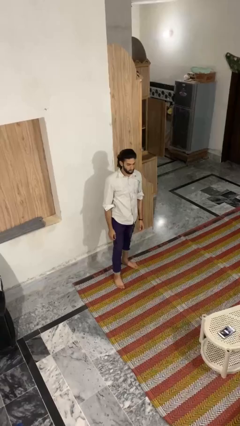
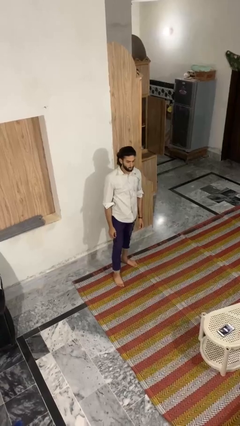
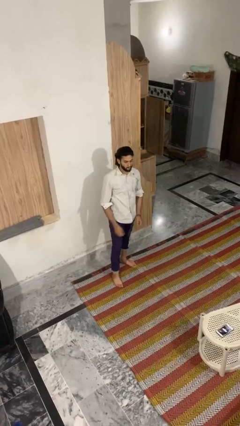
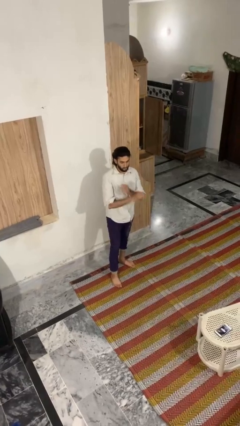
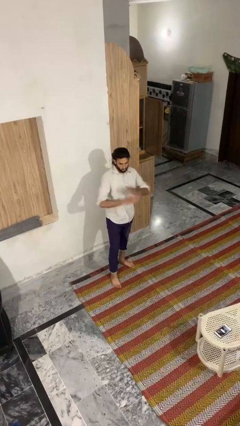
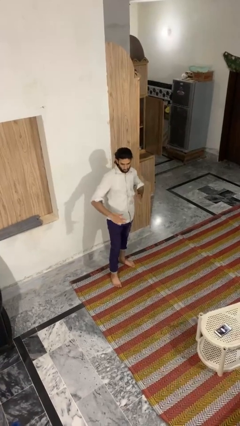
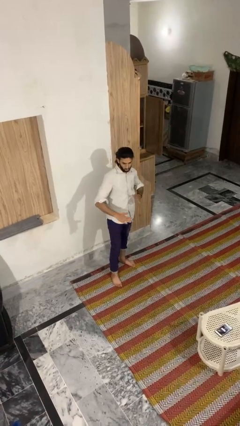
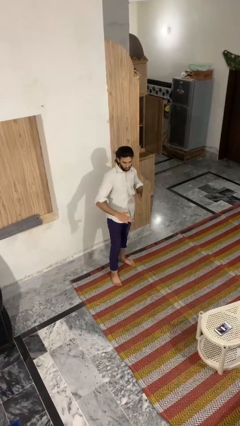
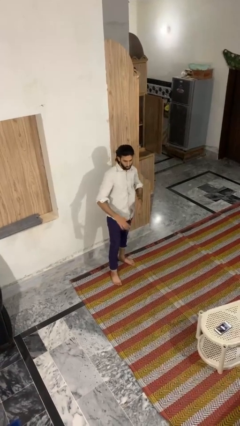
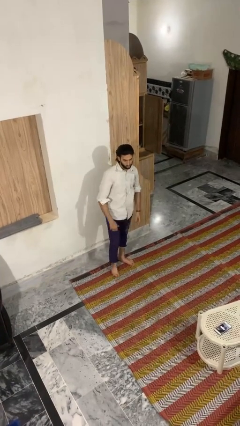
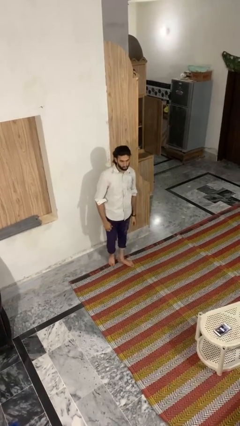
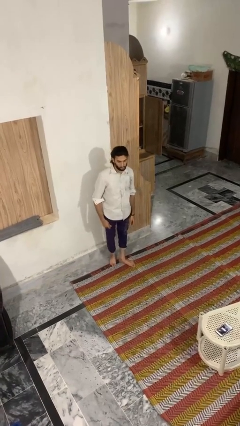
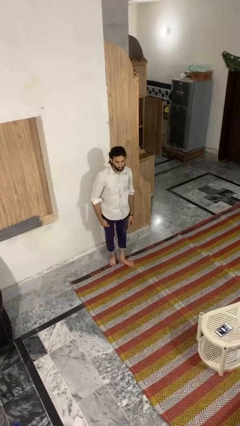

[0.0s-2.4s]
person karate chop

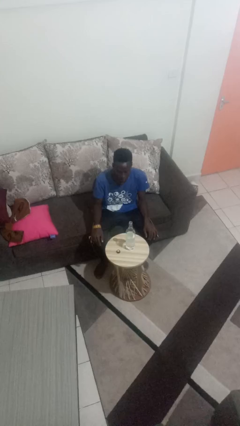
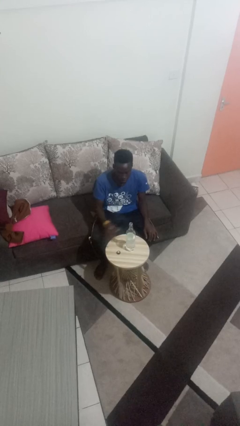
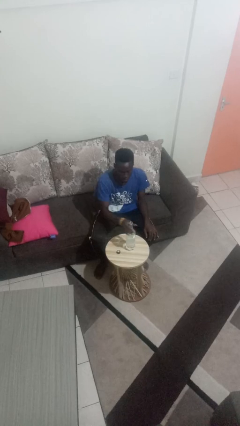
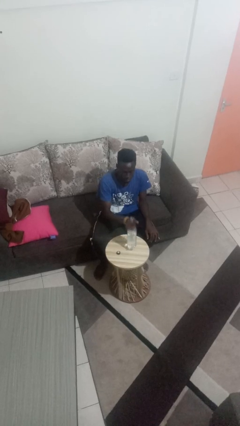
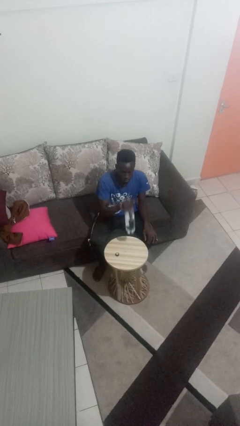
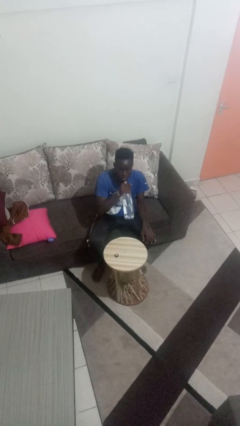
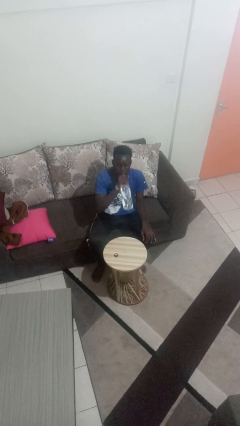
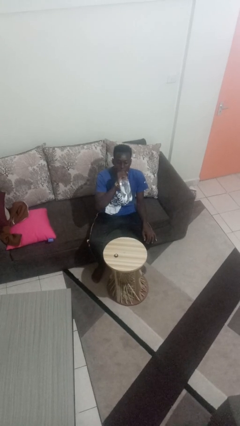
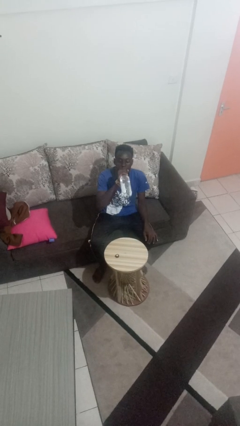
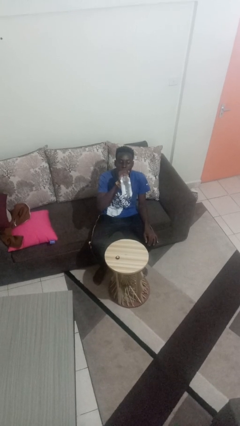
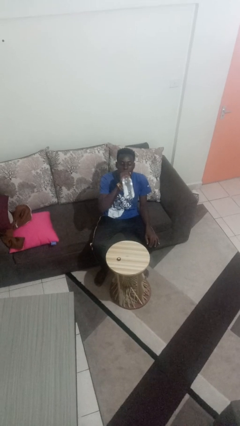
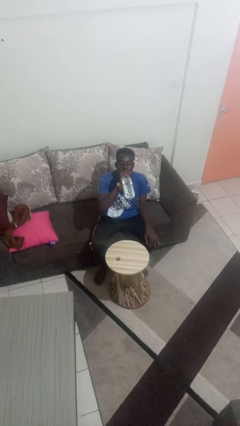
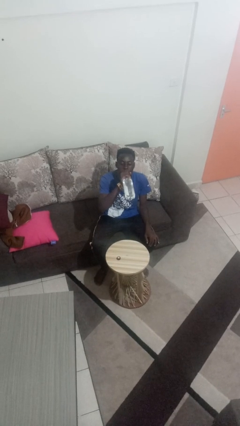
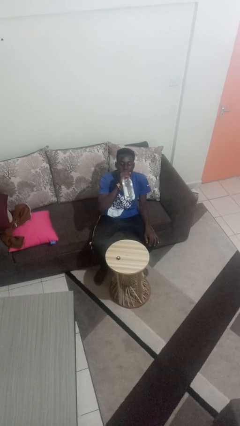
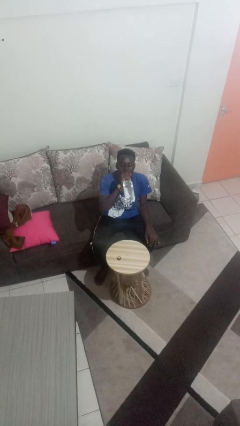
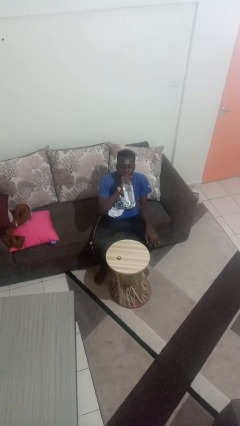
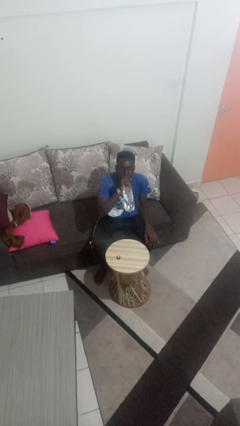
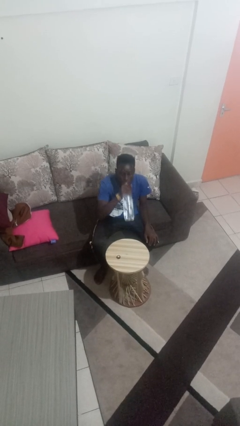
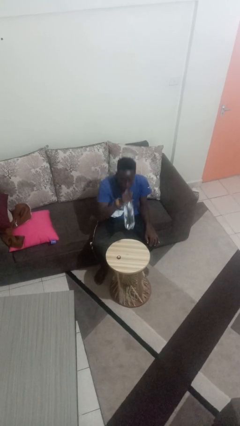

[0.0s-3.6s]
person drinks from bottle

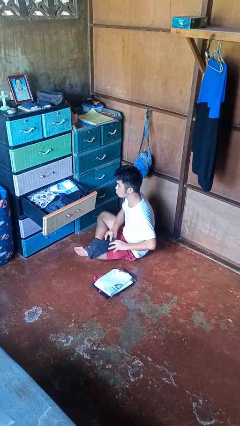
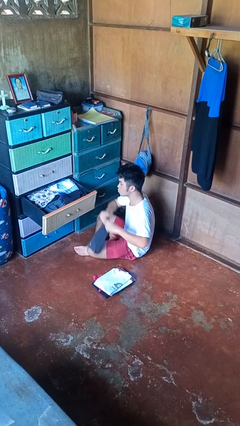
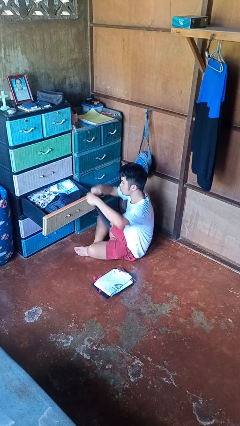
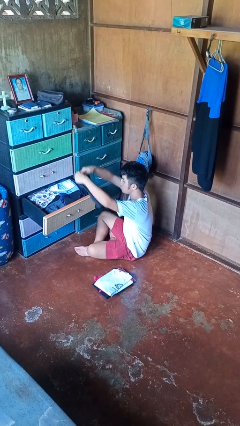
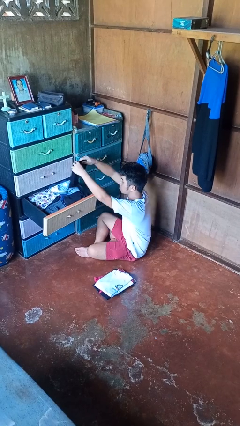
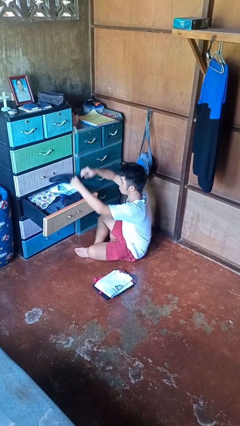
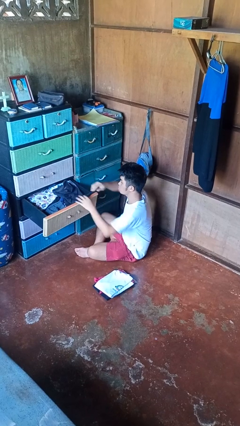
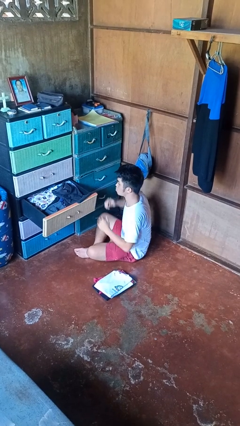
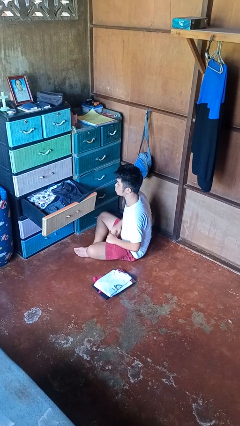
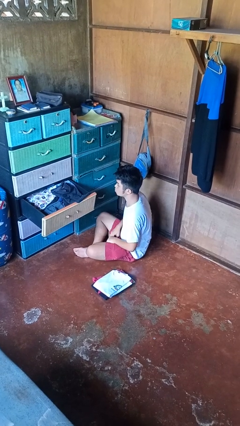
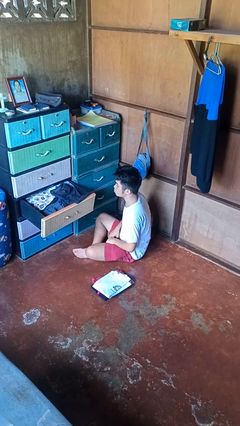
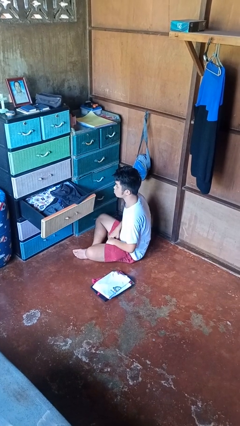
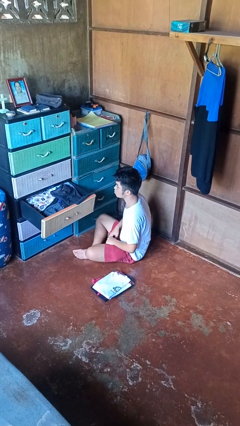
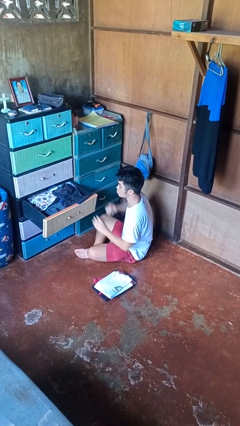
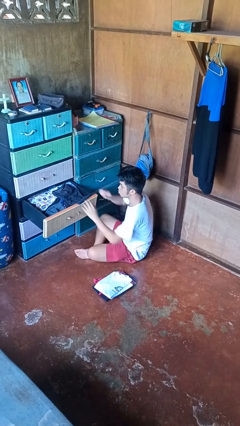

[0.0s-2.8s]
person puts clothes into dresser

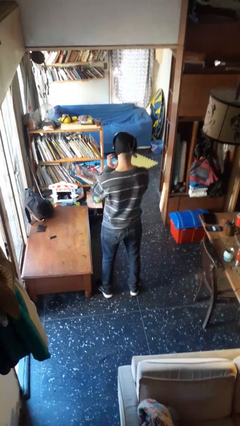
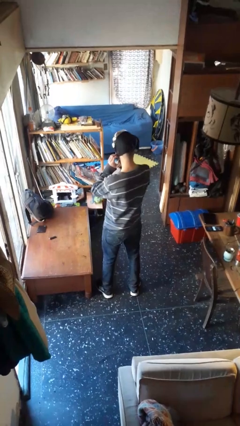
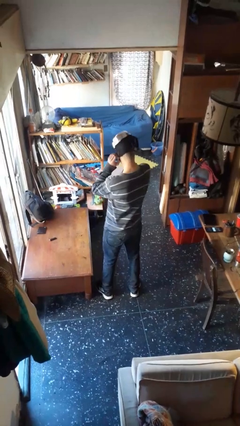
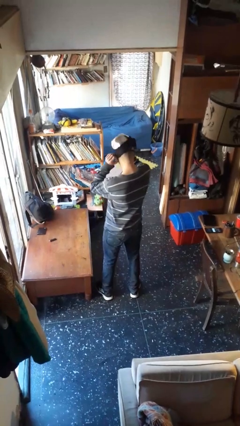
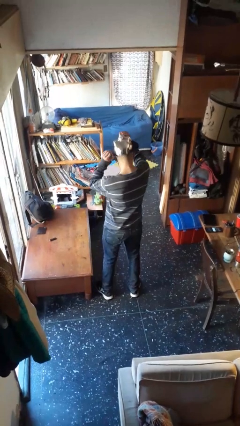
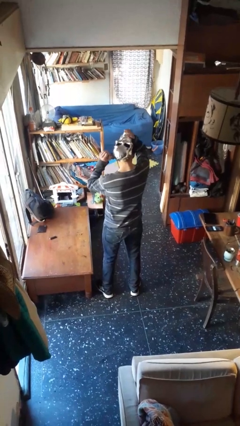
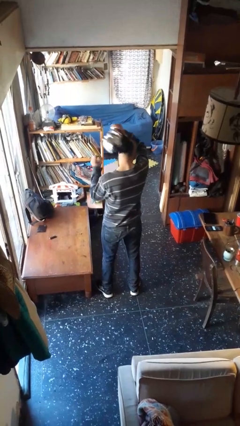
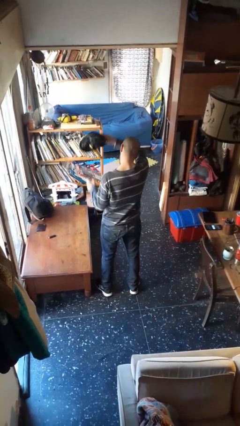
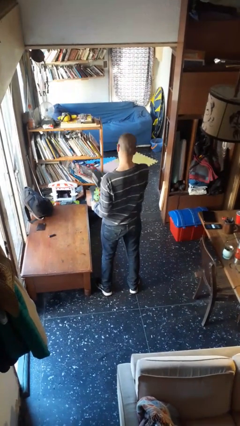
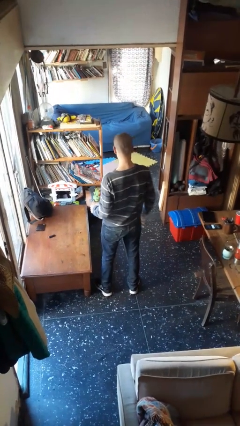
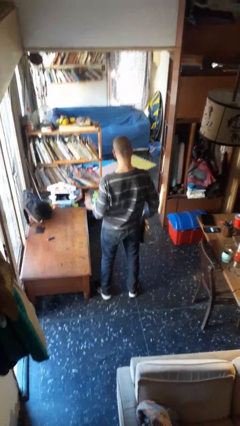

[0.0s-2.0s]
person takes off facemask

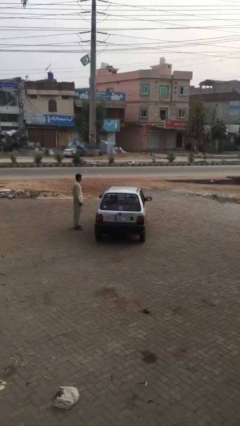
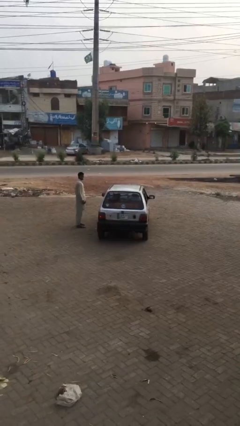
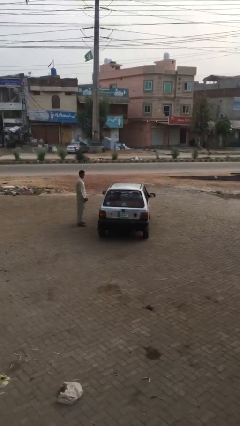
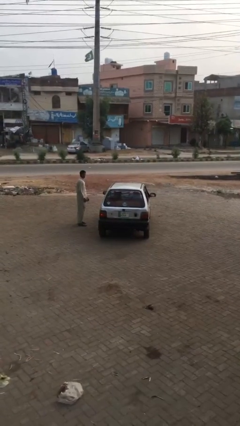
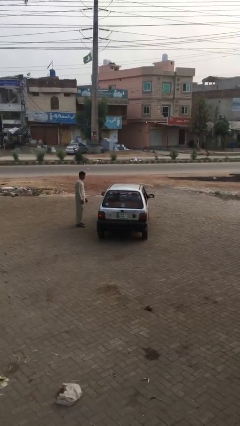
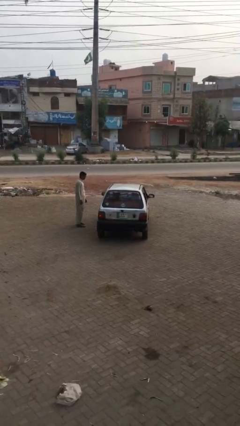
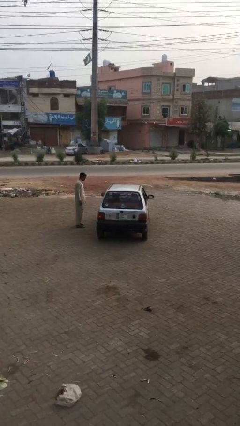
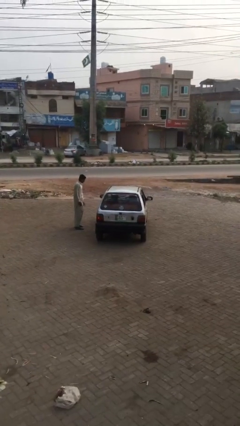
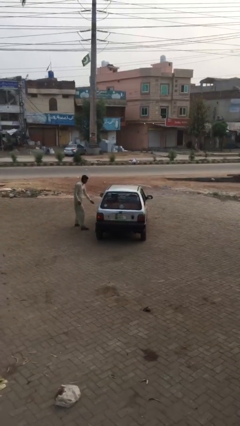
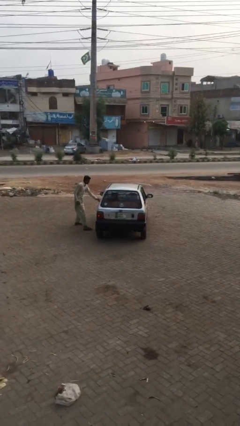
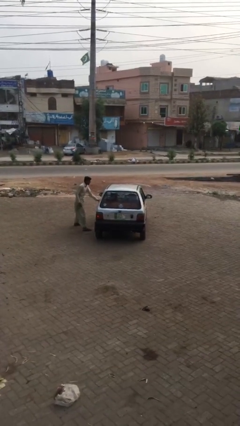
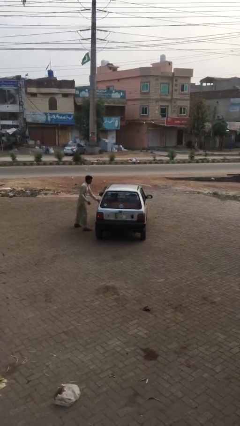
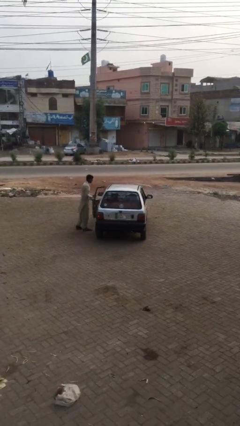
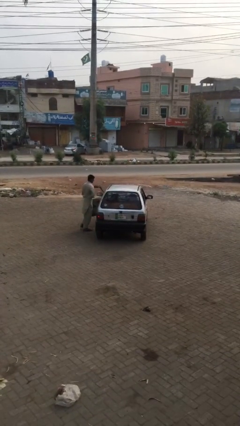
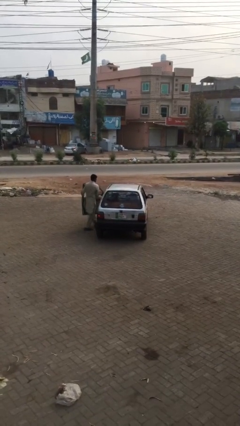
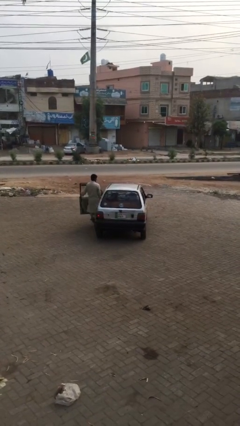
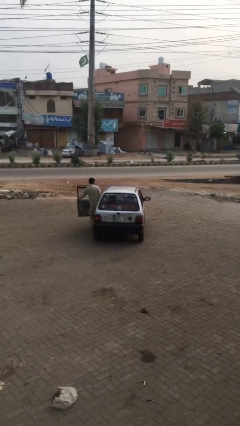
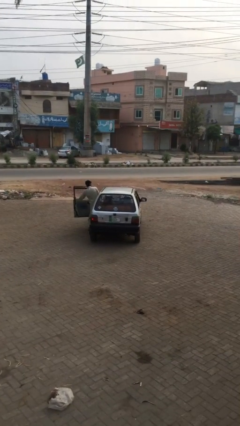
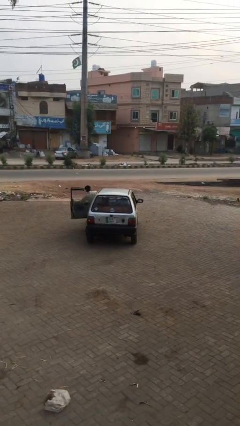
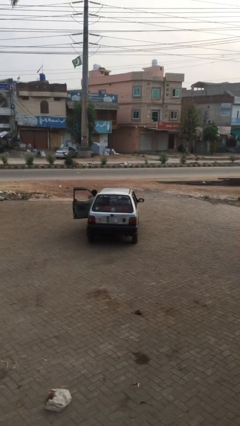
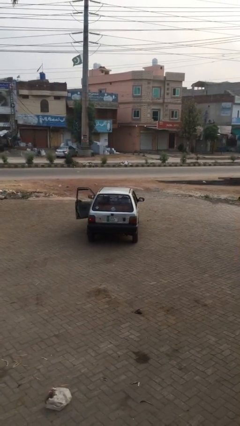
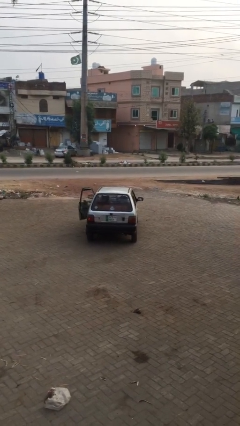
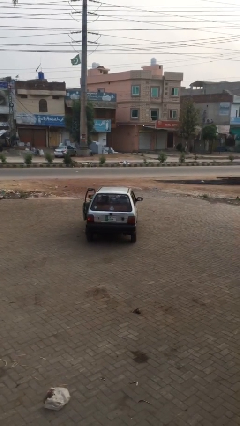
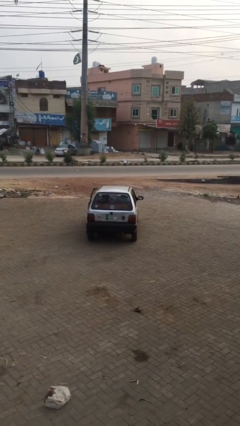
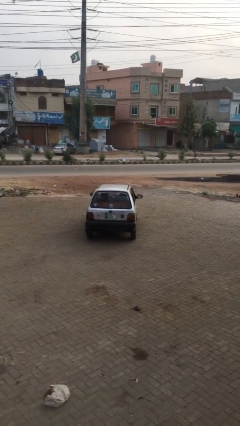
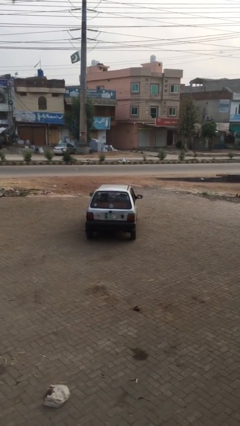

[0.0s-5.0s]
car picks up person

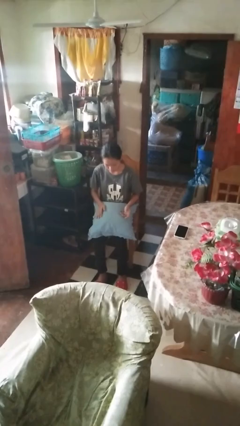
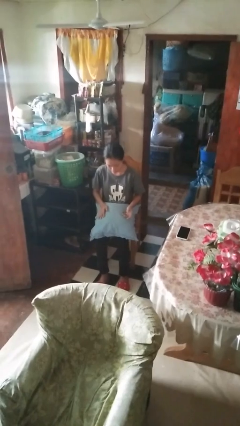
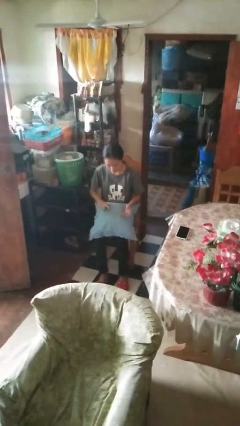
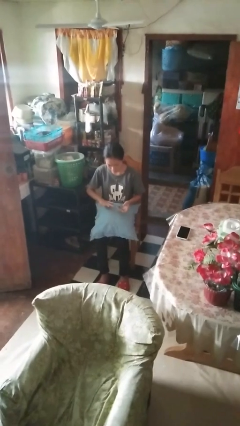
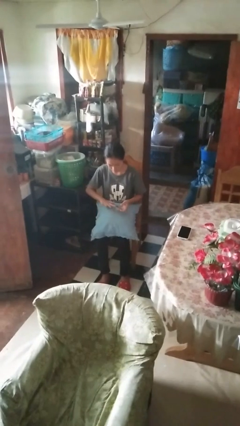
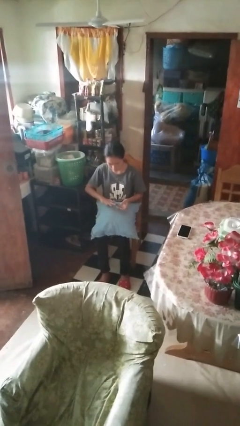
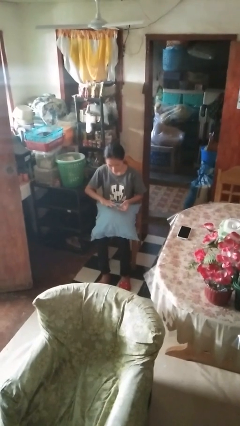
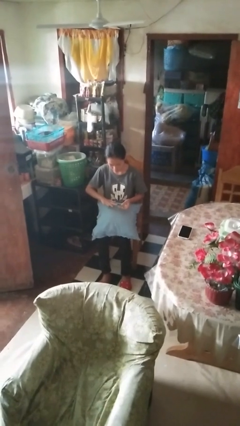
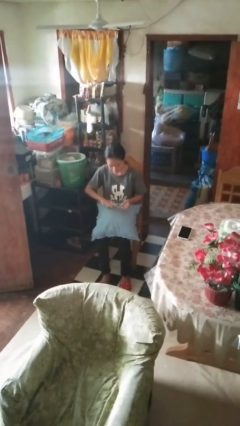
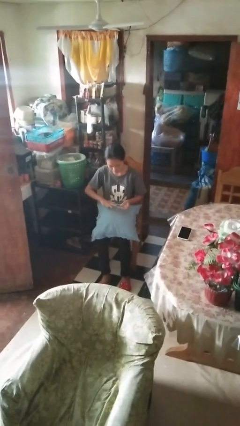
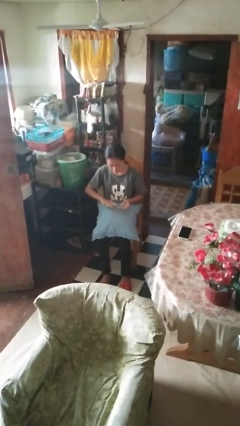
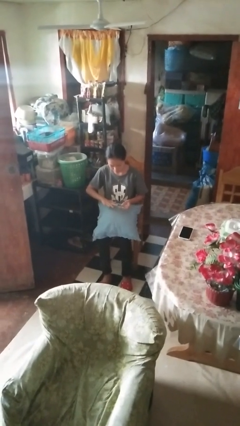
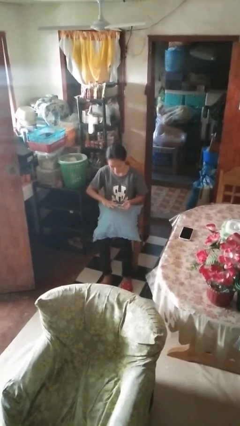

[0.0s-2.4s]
person clips fingernails
